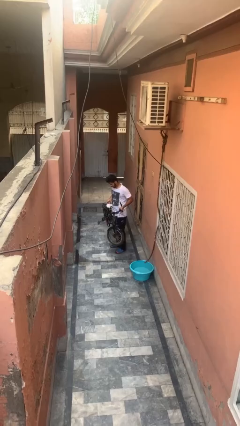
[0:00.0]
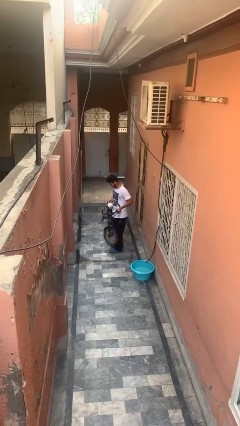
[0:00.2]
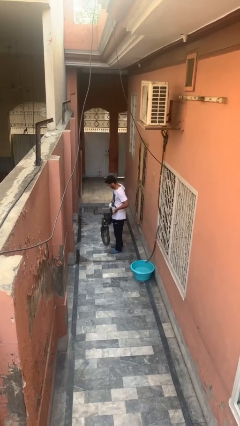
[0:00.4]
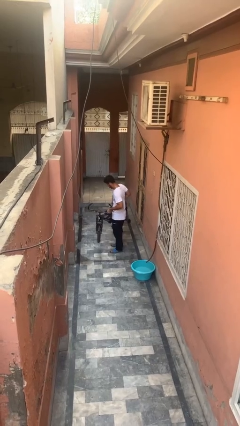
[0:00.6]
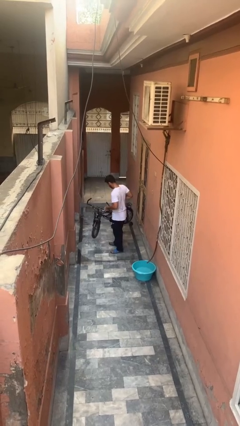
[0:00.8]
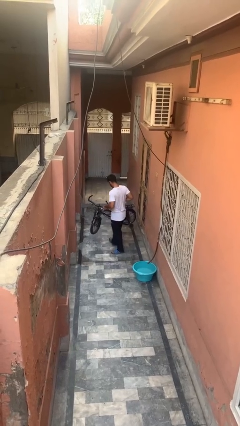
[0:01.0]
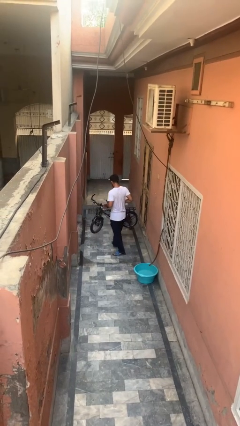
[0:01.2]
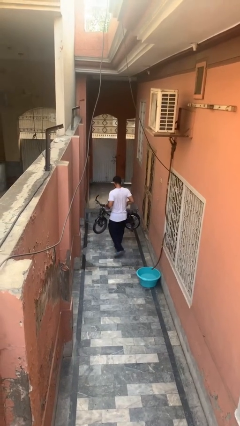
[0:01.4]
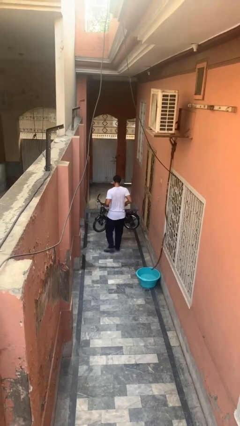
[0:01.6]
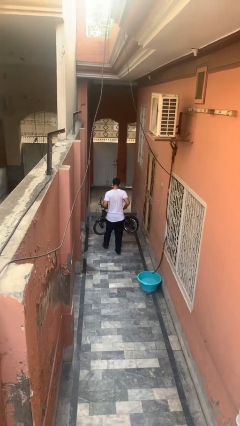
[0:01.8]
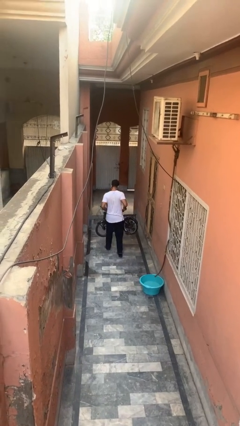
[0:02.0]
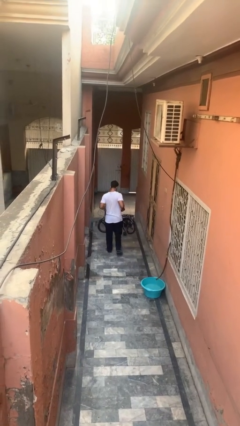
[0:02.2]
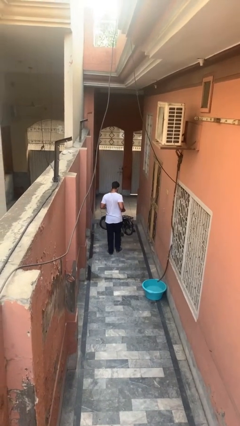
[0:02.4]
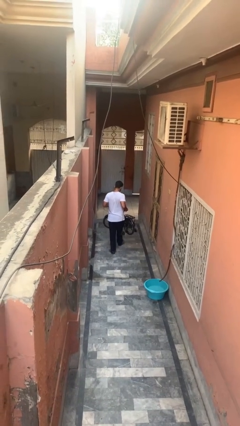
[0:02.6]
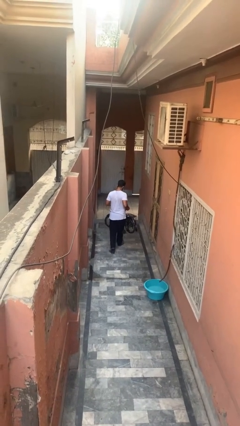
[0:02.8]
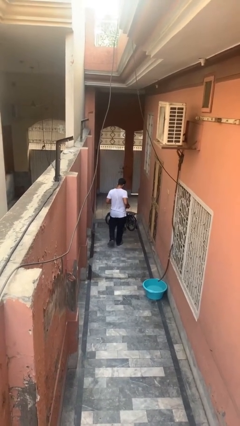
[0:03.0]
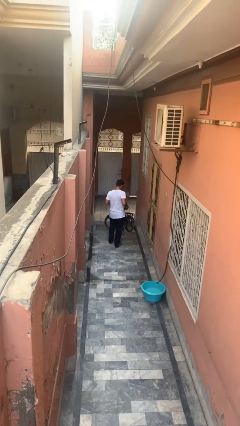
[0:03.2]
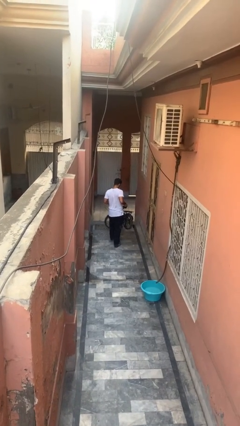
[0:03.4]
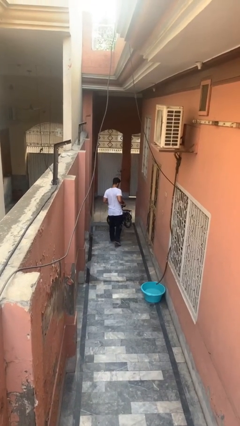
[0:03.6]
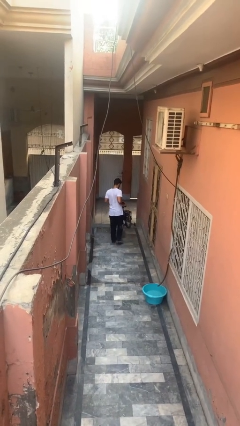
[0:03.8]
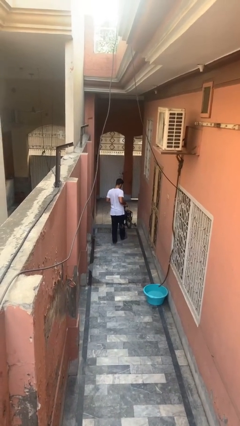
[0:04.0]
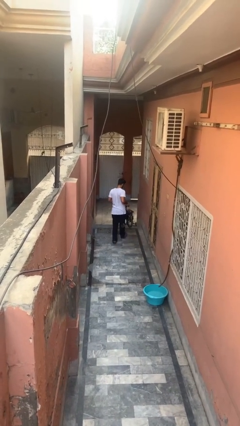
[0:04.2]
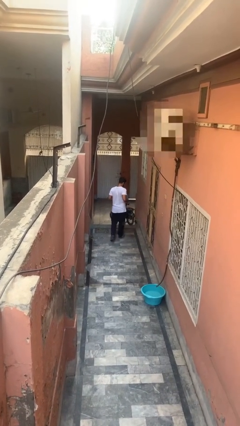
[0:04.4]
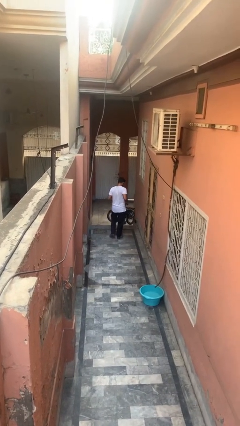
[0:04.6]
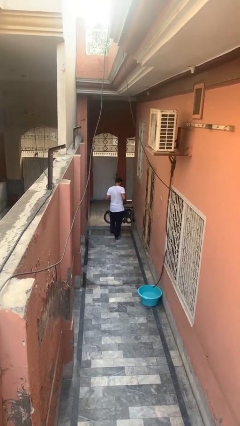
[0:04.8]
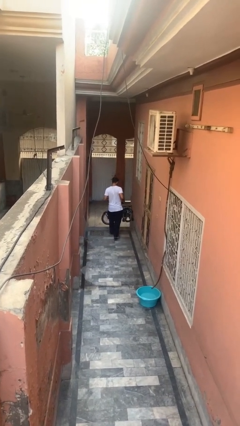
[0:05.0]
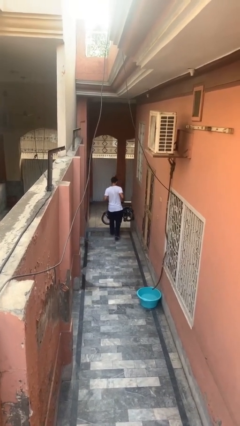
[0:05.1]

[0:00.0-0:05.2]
person carries bicycle

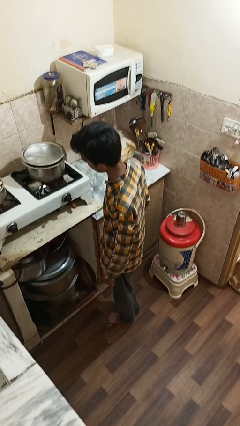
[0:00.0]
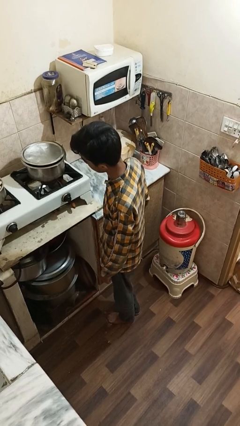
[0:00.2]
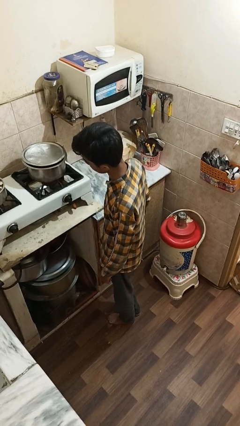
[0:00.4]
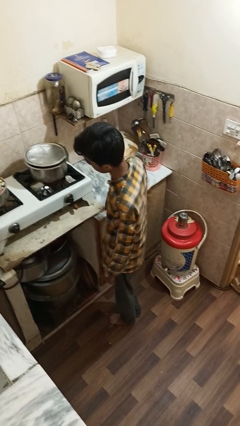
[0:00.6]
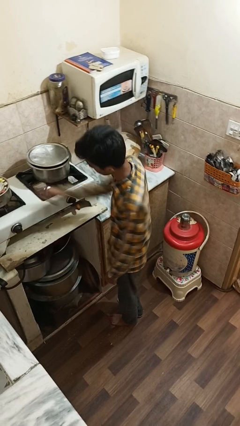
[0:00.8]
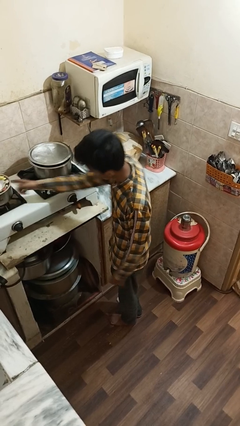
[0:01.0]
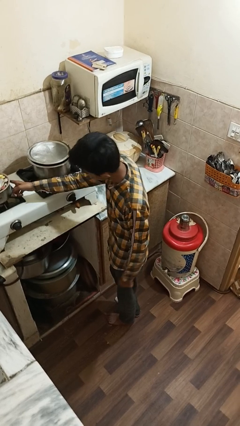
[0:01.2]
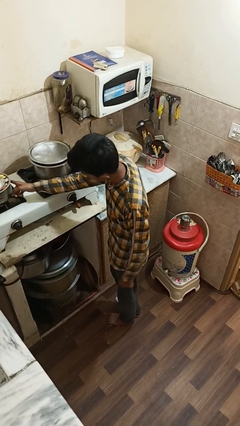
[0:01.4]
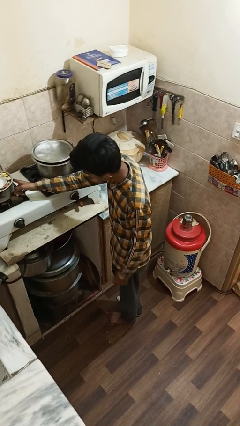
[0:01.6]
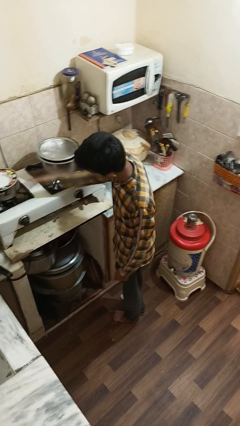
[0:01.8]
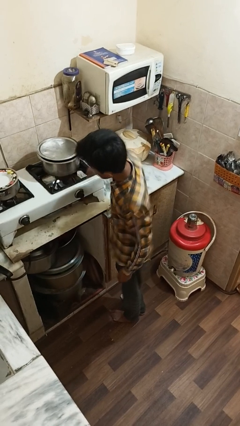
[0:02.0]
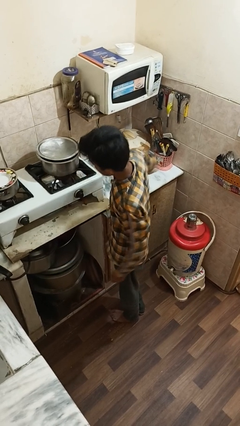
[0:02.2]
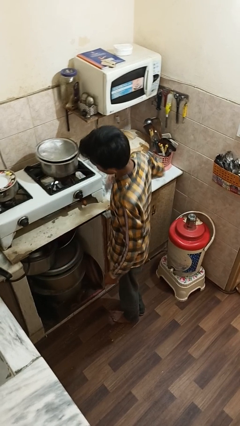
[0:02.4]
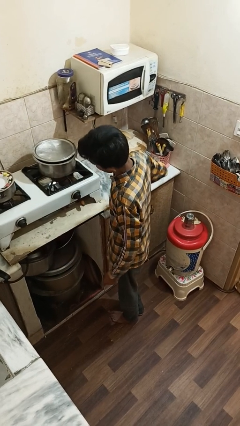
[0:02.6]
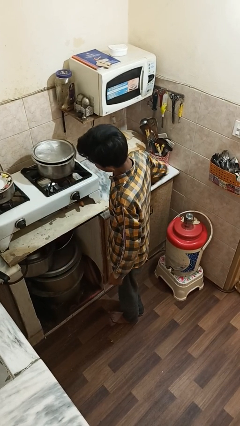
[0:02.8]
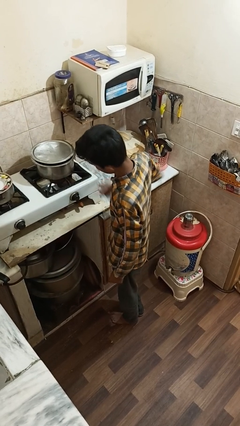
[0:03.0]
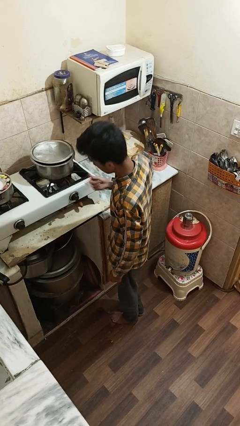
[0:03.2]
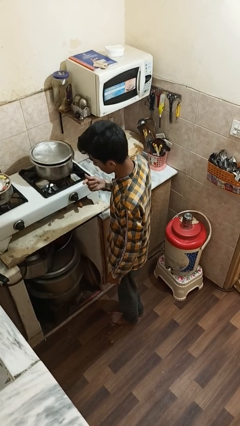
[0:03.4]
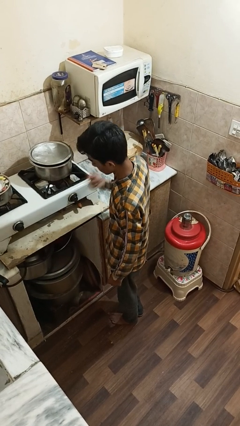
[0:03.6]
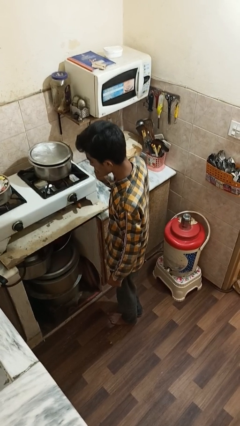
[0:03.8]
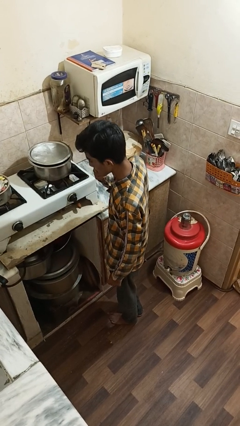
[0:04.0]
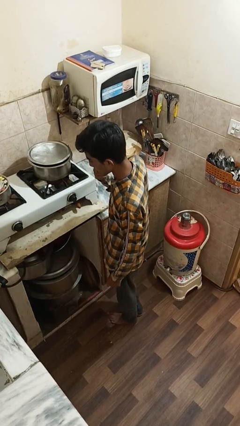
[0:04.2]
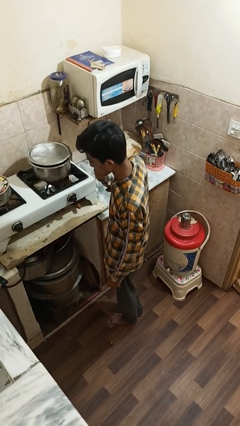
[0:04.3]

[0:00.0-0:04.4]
person burns hand

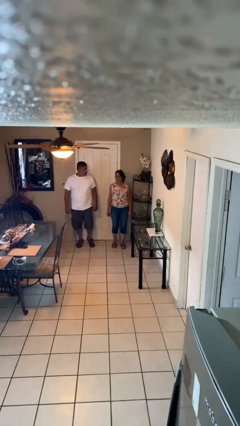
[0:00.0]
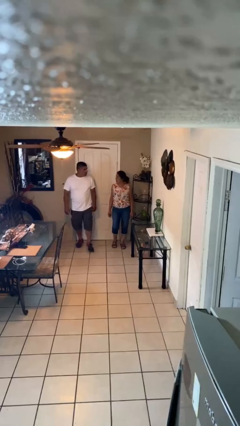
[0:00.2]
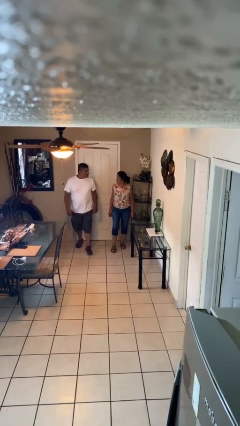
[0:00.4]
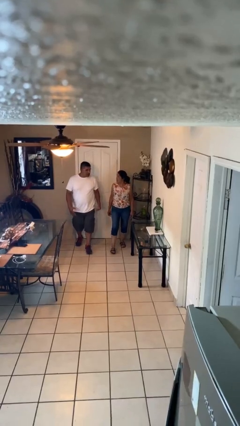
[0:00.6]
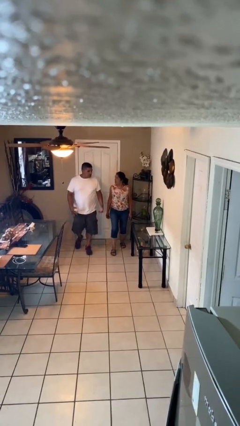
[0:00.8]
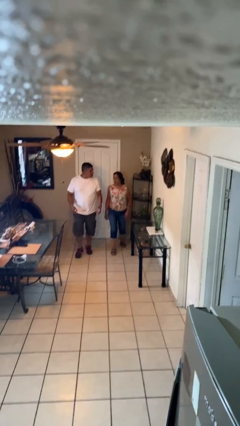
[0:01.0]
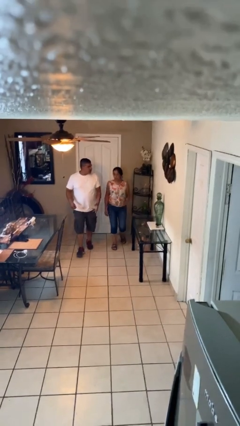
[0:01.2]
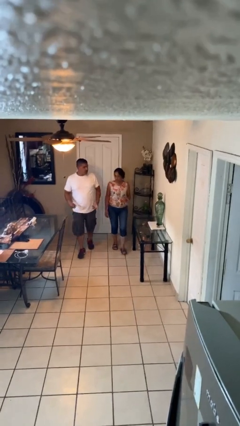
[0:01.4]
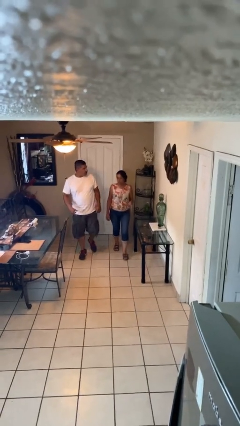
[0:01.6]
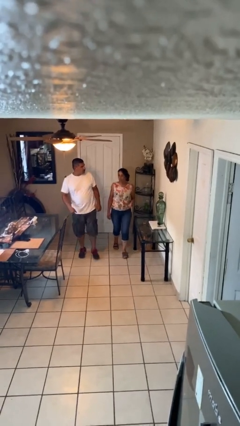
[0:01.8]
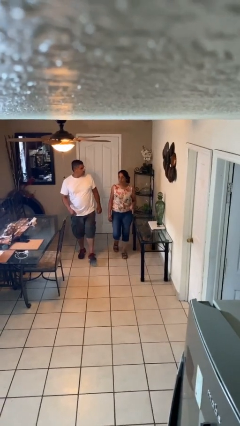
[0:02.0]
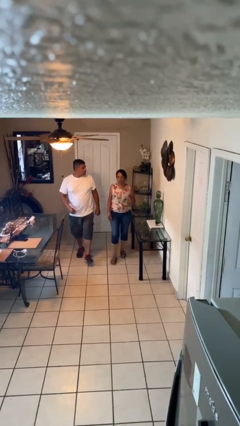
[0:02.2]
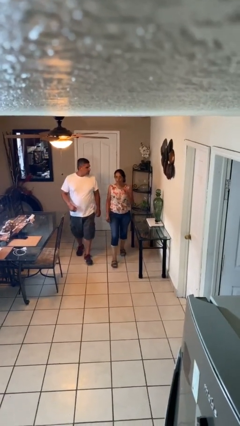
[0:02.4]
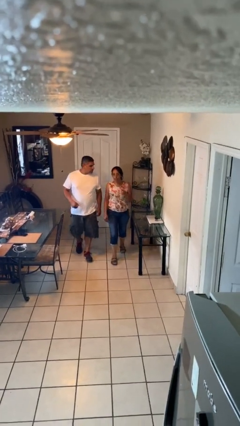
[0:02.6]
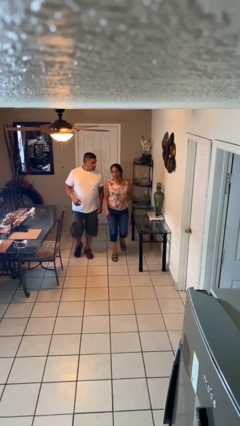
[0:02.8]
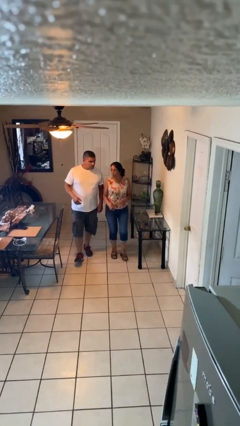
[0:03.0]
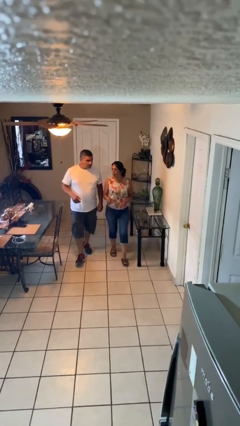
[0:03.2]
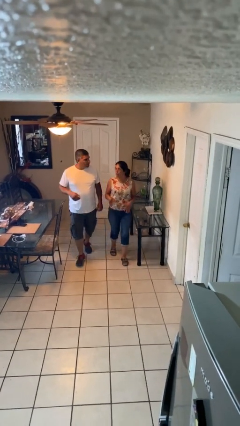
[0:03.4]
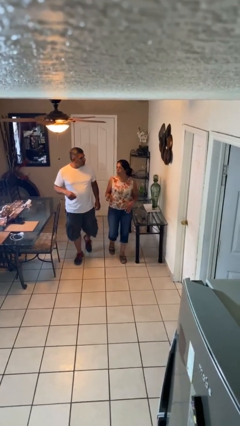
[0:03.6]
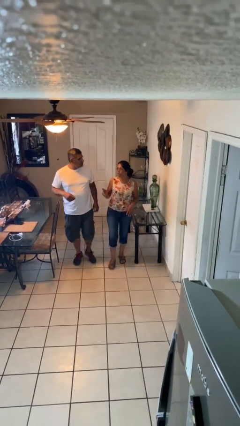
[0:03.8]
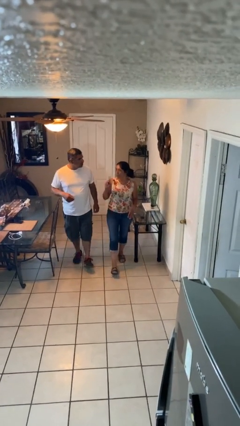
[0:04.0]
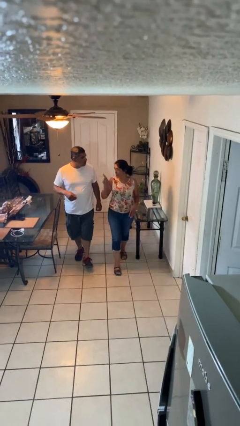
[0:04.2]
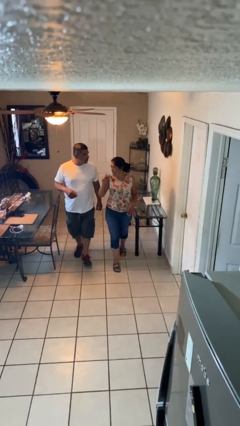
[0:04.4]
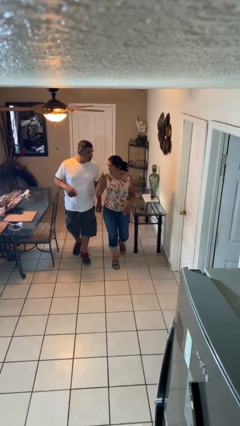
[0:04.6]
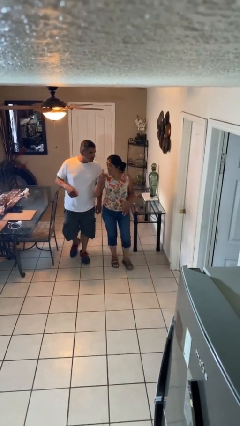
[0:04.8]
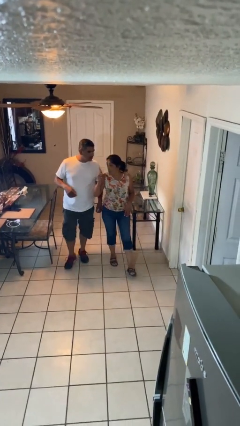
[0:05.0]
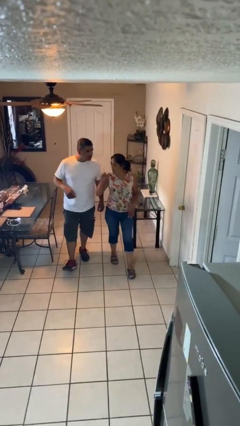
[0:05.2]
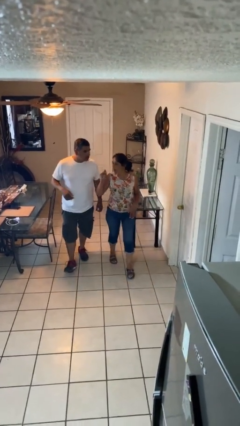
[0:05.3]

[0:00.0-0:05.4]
person talks to person

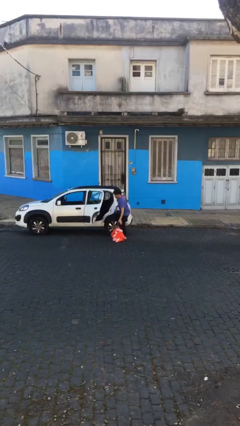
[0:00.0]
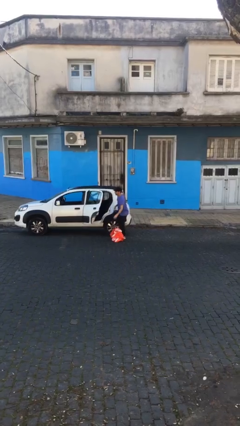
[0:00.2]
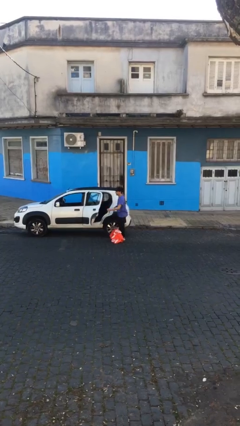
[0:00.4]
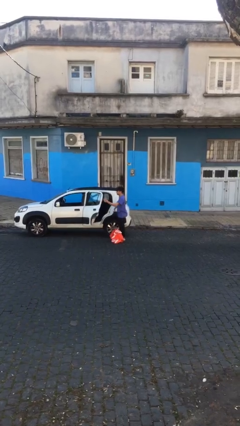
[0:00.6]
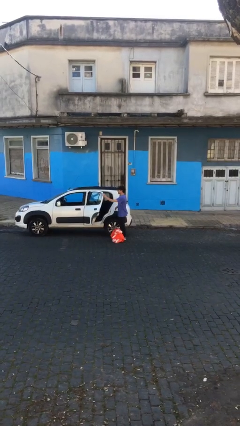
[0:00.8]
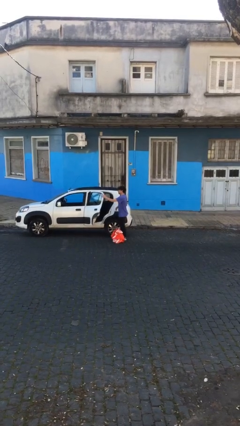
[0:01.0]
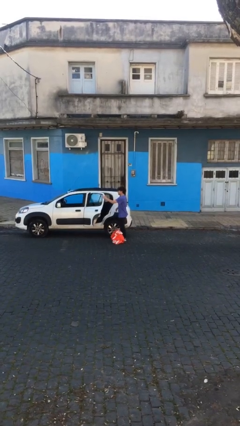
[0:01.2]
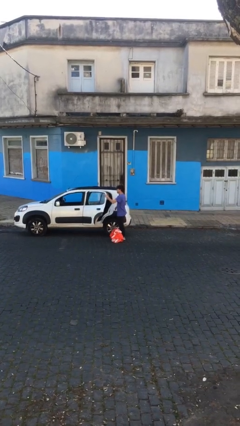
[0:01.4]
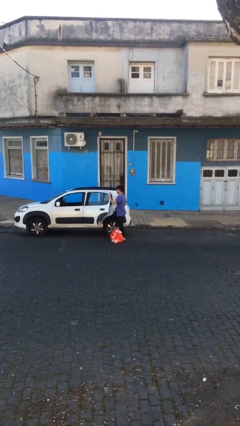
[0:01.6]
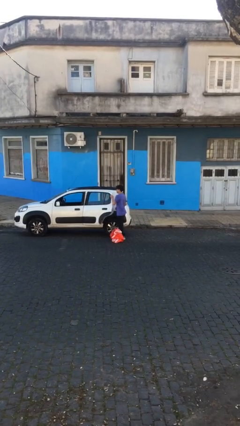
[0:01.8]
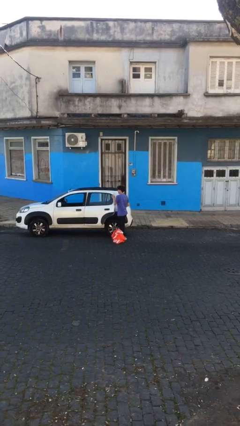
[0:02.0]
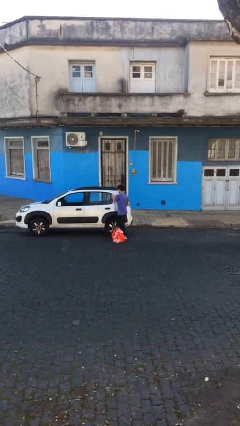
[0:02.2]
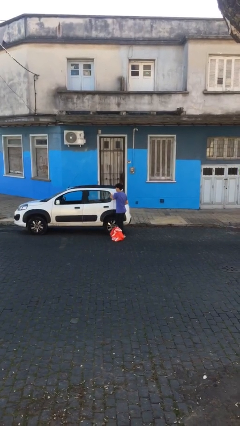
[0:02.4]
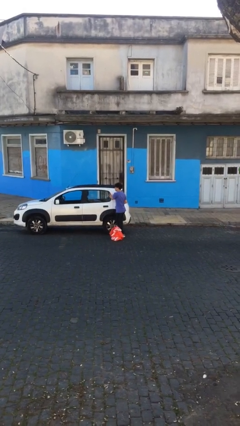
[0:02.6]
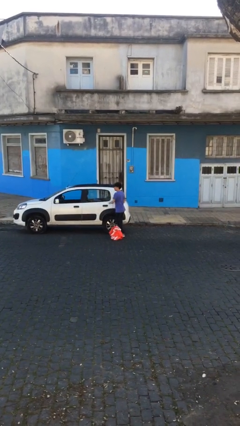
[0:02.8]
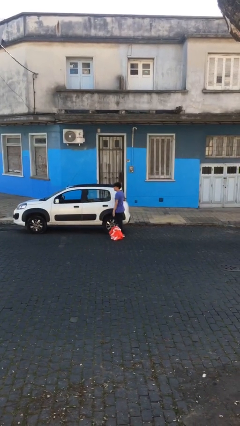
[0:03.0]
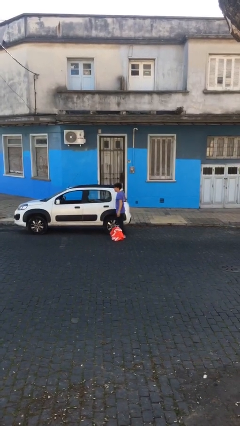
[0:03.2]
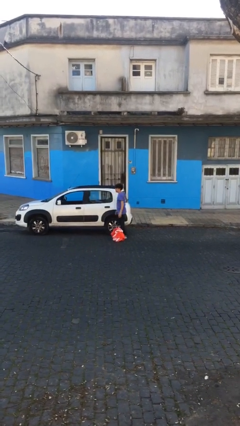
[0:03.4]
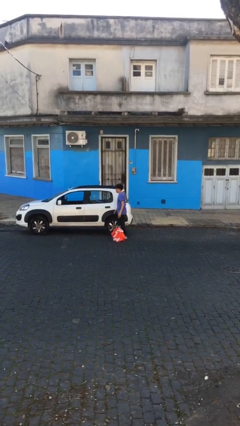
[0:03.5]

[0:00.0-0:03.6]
person closes car door
